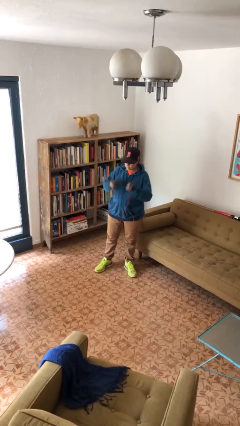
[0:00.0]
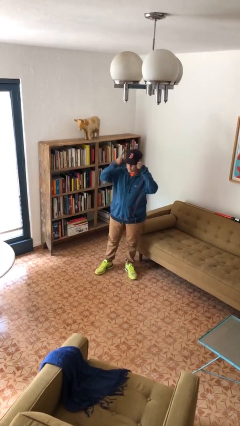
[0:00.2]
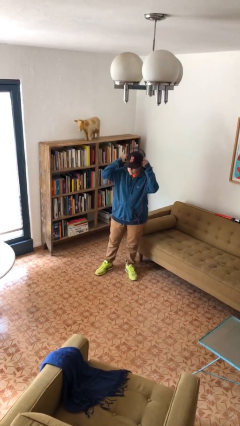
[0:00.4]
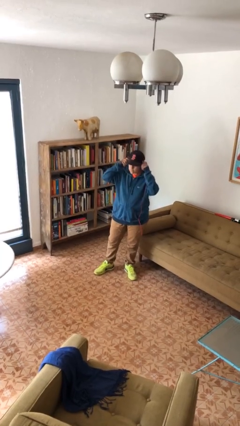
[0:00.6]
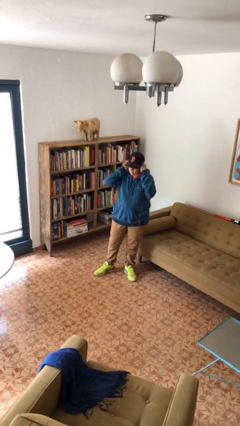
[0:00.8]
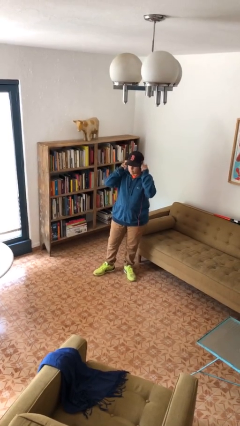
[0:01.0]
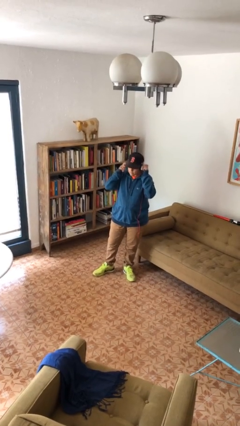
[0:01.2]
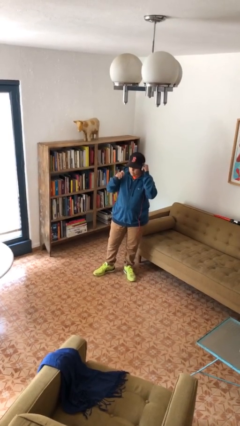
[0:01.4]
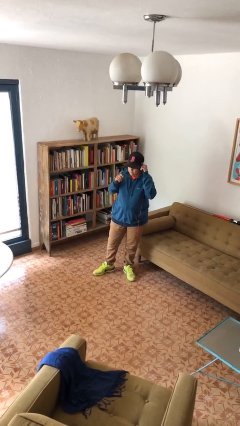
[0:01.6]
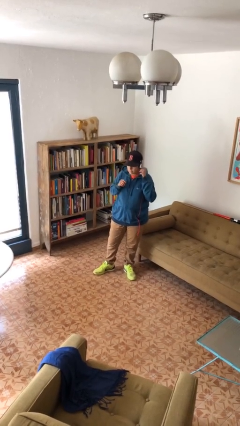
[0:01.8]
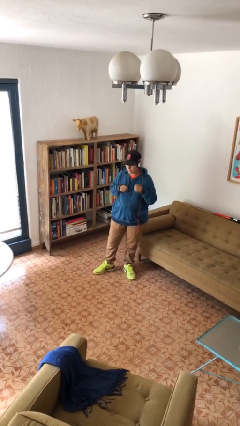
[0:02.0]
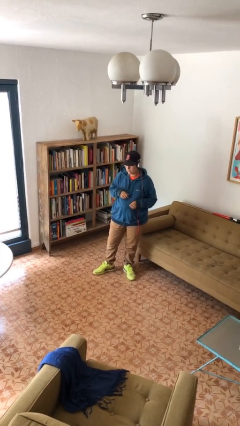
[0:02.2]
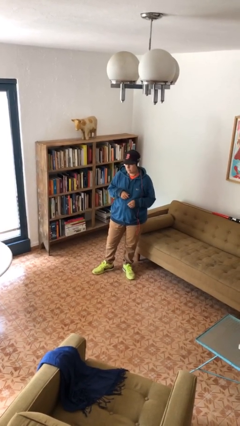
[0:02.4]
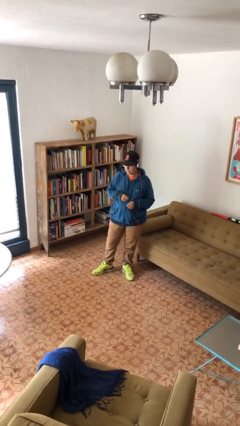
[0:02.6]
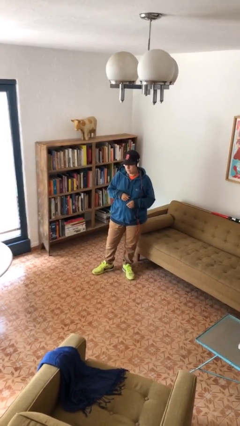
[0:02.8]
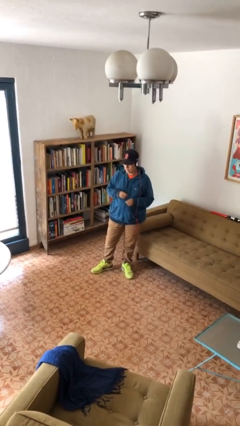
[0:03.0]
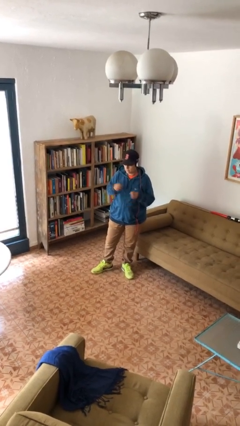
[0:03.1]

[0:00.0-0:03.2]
person puts on headphones

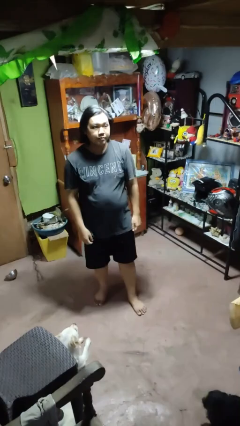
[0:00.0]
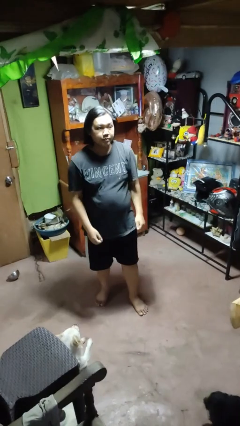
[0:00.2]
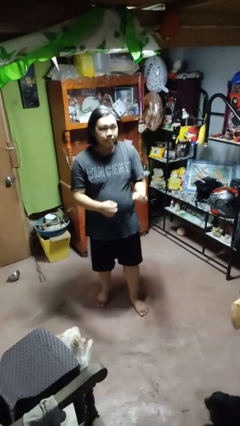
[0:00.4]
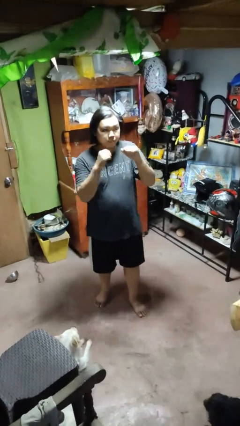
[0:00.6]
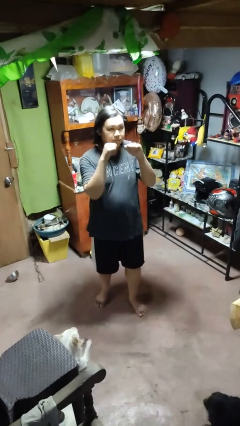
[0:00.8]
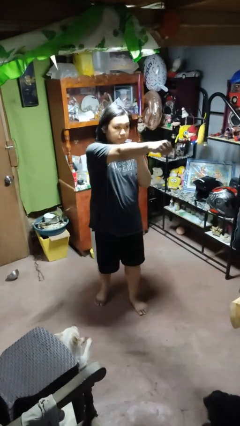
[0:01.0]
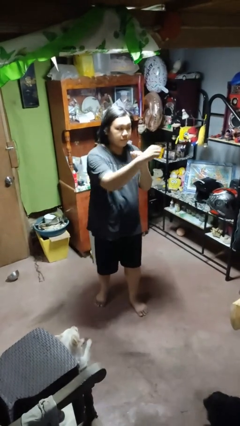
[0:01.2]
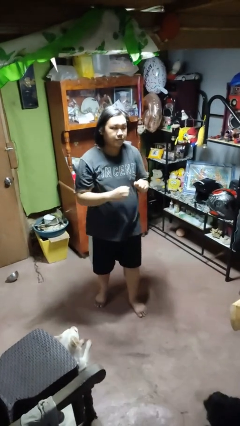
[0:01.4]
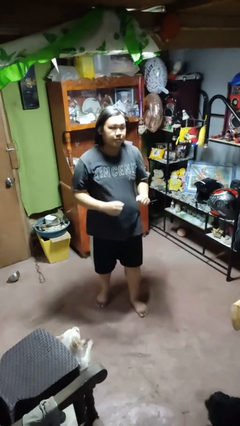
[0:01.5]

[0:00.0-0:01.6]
person punches

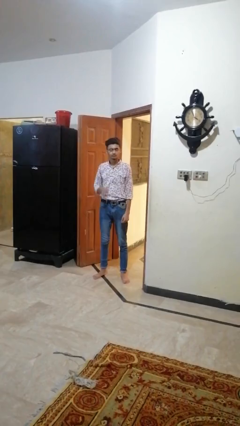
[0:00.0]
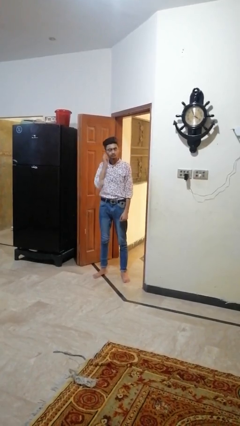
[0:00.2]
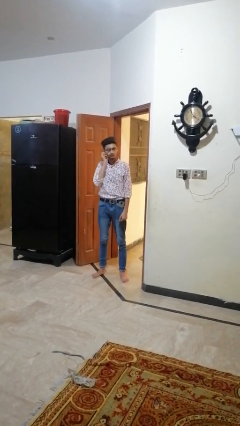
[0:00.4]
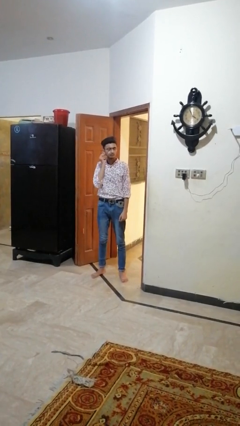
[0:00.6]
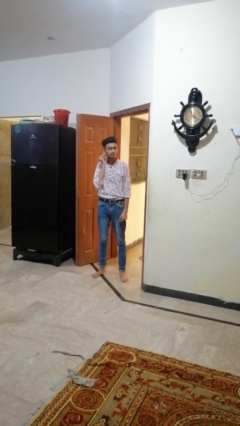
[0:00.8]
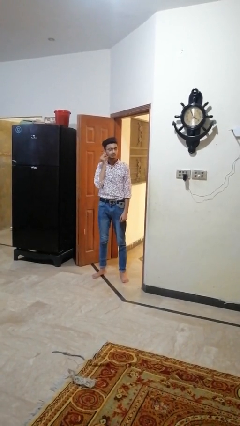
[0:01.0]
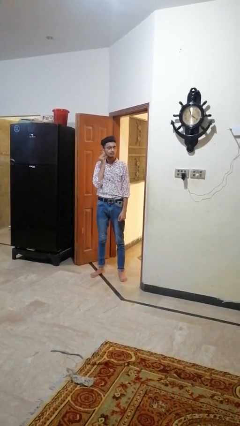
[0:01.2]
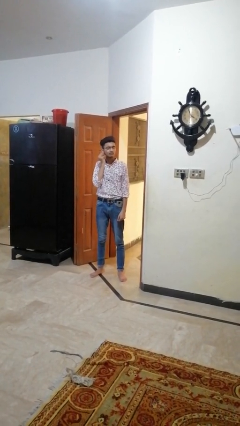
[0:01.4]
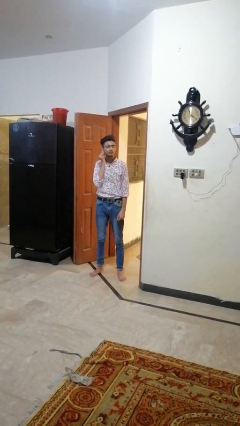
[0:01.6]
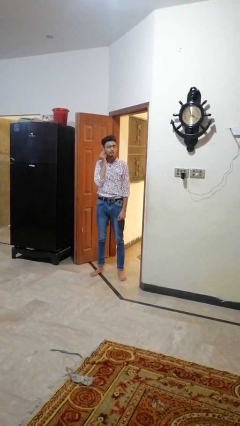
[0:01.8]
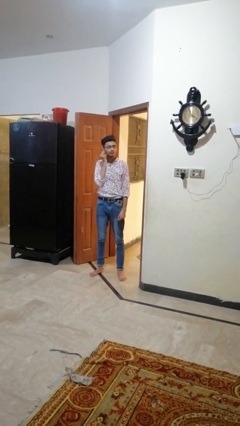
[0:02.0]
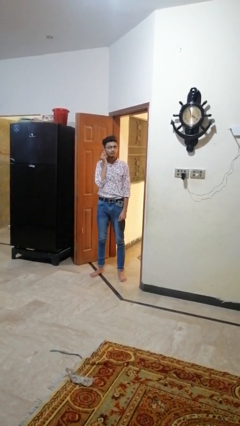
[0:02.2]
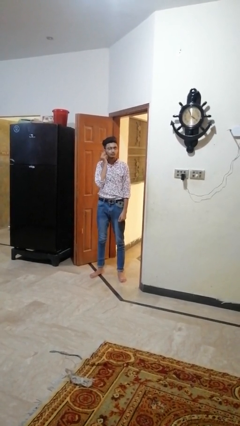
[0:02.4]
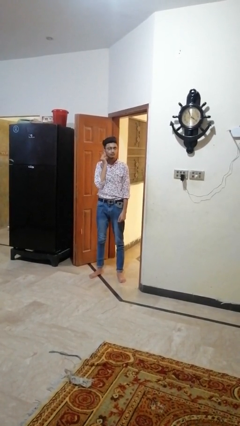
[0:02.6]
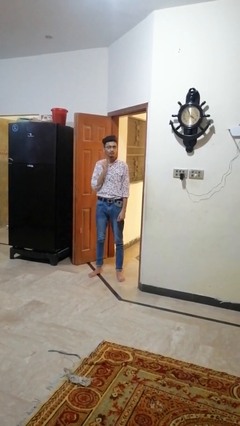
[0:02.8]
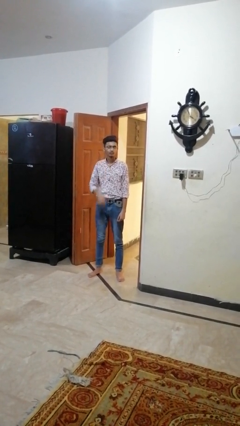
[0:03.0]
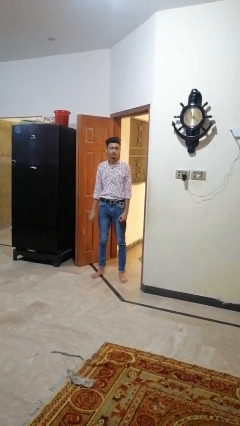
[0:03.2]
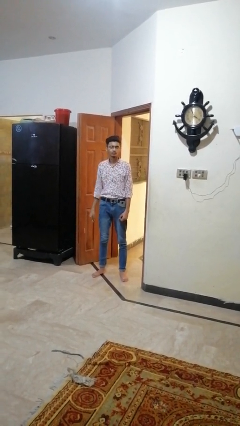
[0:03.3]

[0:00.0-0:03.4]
person touches earlobe

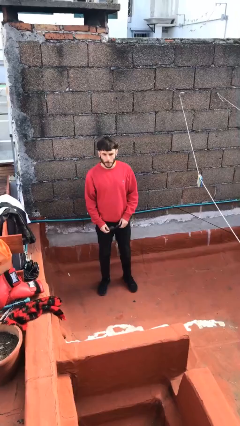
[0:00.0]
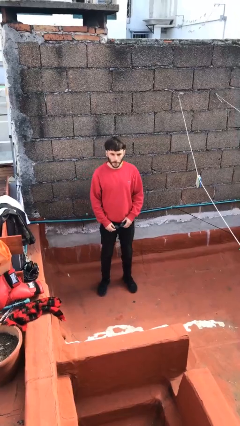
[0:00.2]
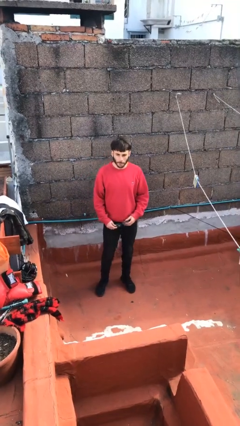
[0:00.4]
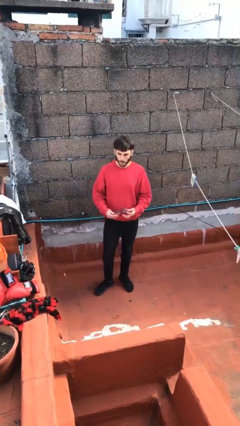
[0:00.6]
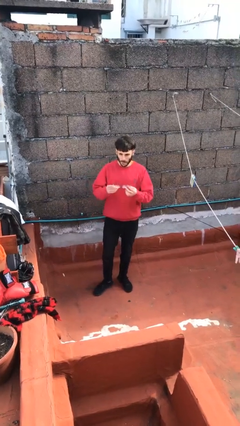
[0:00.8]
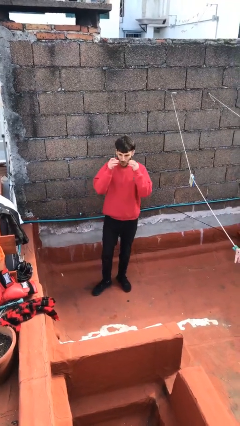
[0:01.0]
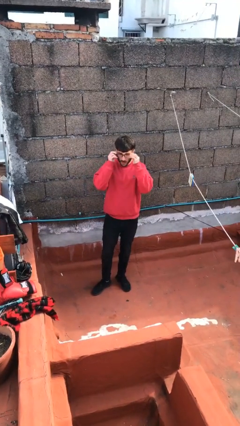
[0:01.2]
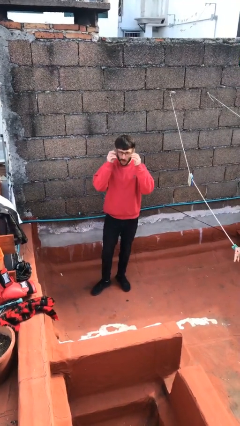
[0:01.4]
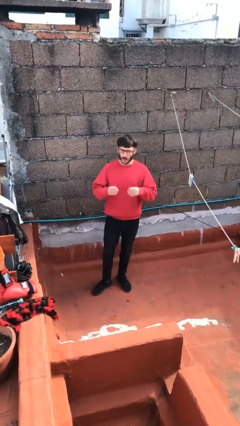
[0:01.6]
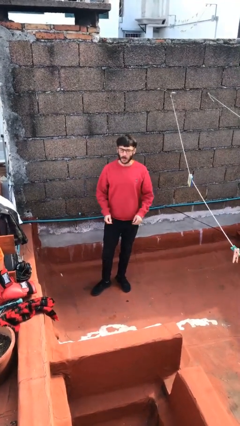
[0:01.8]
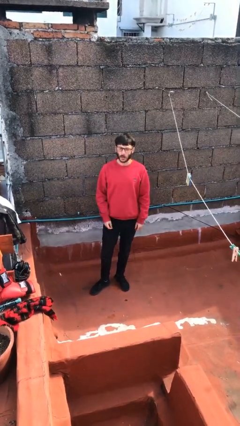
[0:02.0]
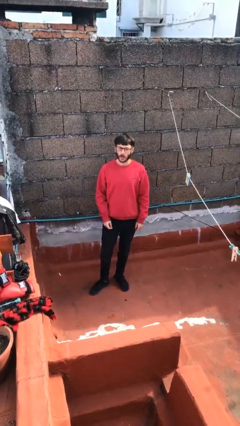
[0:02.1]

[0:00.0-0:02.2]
person puts on glasses

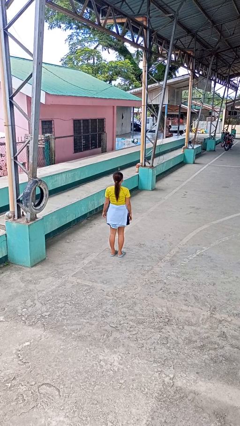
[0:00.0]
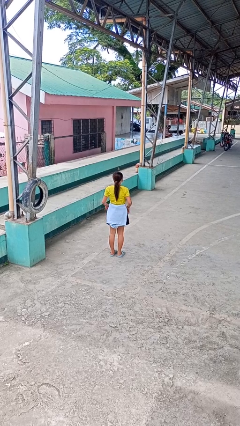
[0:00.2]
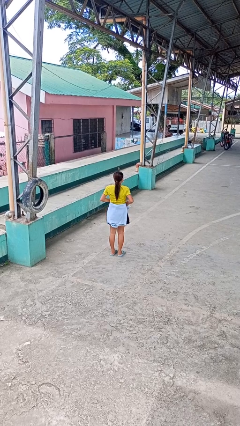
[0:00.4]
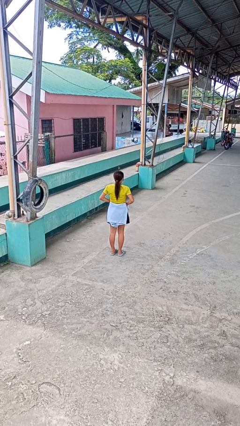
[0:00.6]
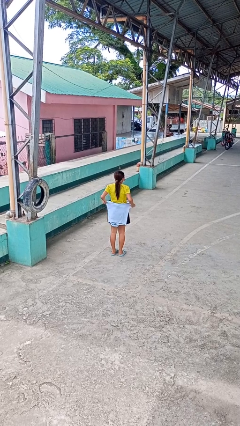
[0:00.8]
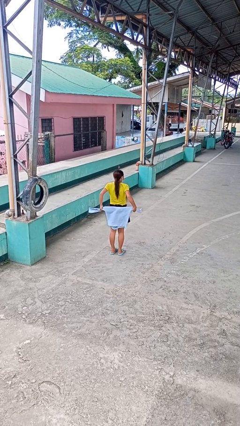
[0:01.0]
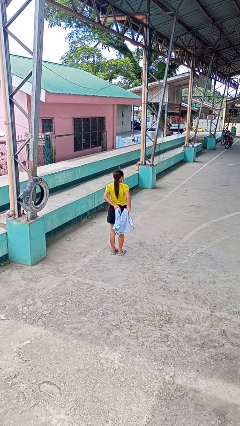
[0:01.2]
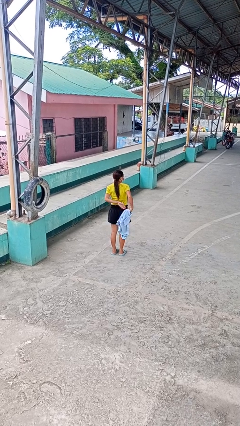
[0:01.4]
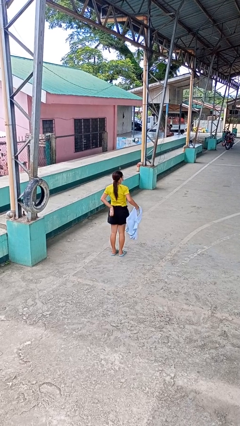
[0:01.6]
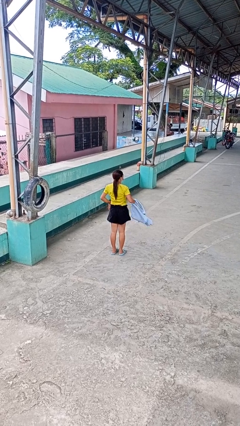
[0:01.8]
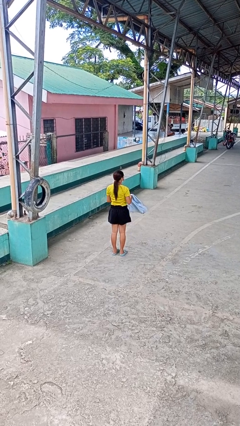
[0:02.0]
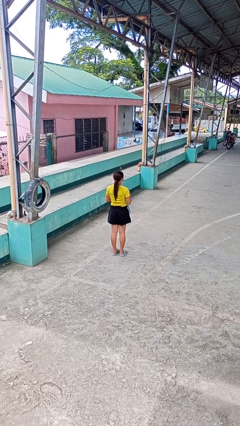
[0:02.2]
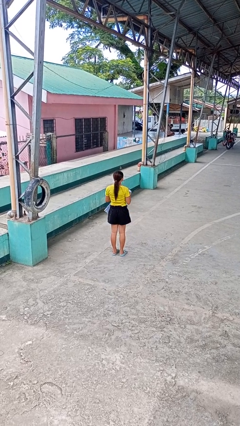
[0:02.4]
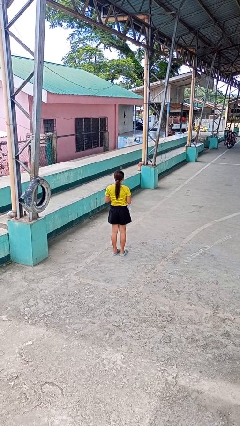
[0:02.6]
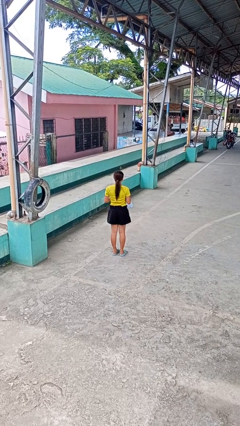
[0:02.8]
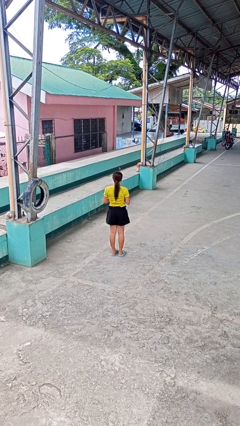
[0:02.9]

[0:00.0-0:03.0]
person unties jacket around waist

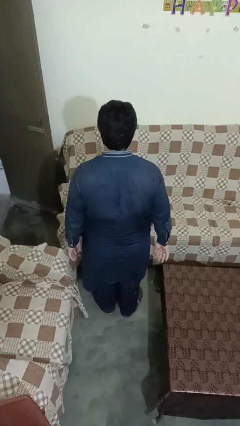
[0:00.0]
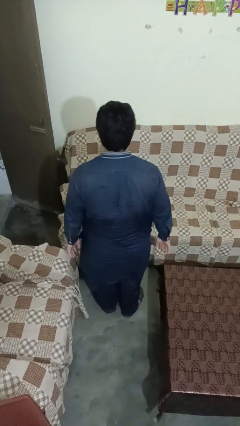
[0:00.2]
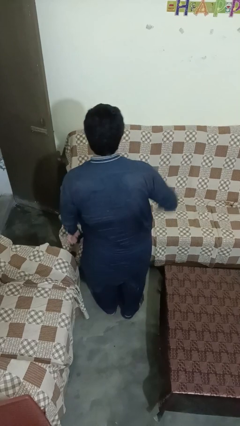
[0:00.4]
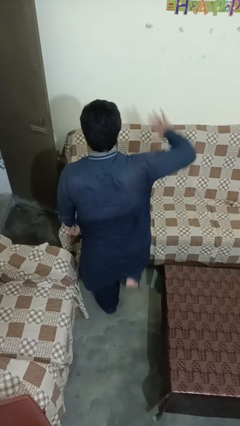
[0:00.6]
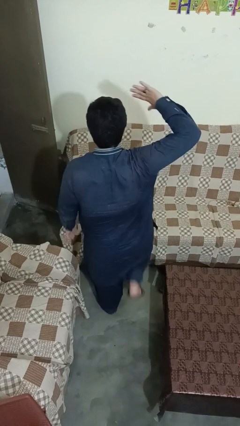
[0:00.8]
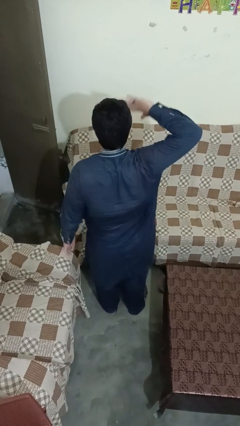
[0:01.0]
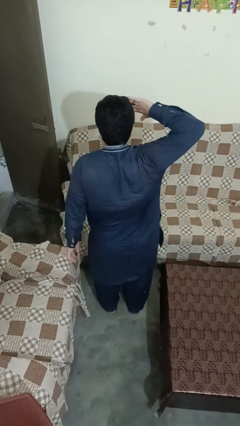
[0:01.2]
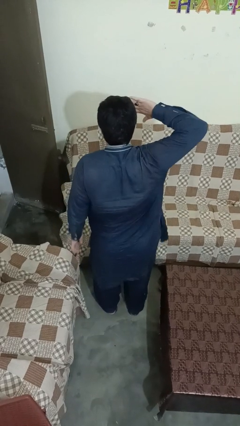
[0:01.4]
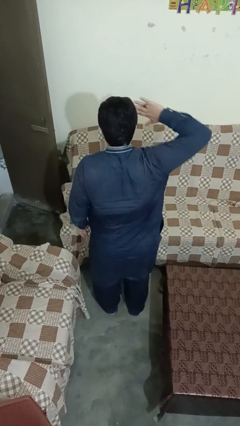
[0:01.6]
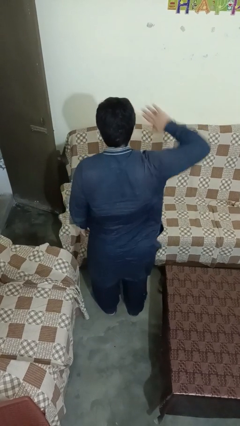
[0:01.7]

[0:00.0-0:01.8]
person salutes

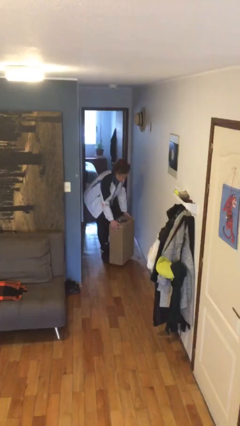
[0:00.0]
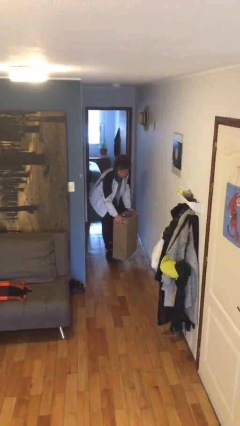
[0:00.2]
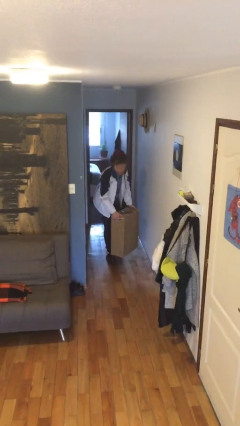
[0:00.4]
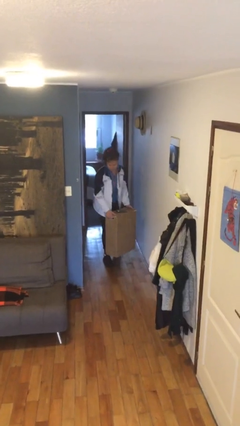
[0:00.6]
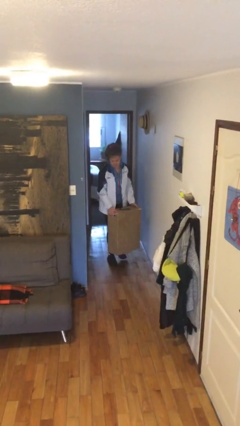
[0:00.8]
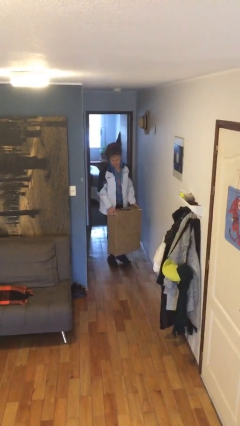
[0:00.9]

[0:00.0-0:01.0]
person picks up object from floor

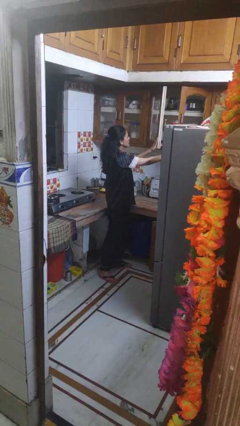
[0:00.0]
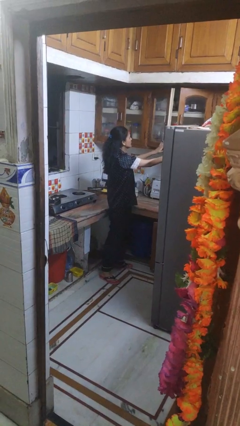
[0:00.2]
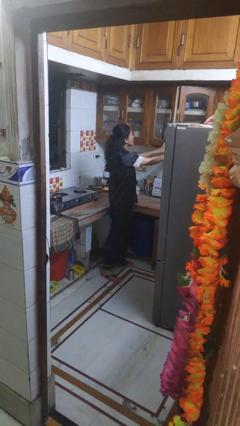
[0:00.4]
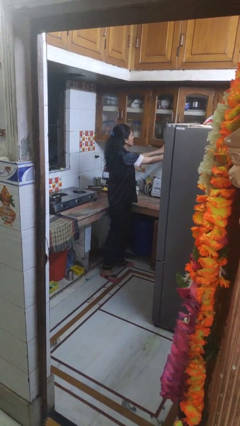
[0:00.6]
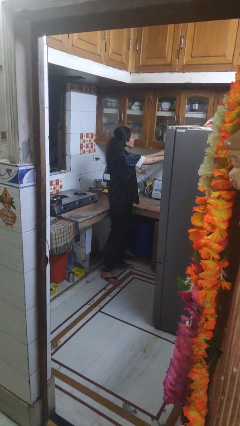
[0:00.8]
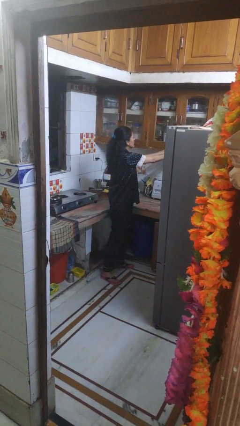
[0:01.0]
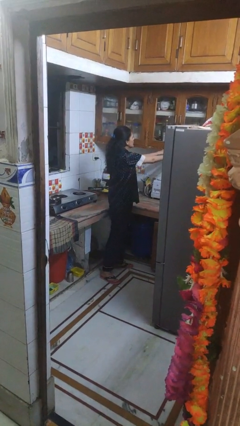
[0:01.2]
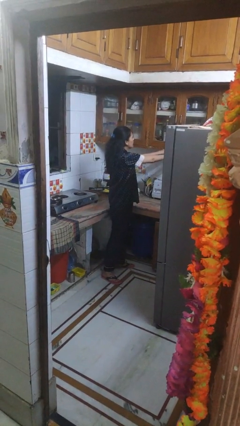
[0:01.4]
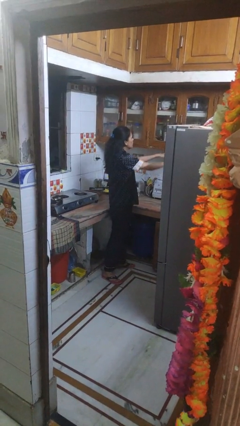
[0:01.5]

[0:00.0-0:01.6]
person closes cabinet
